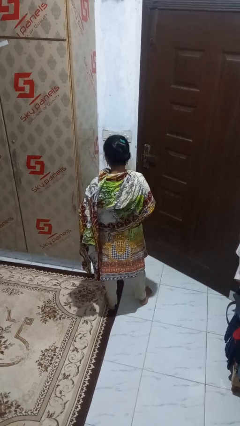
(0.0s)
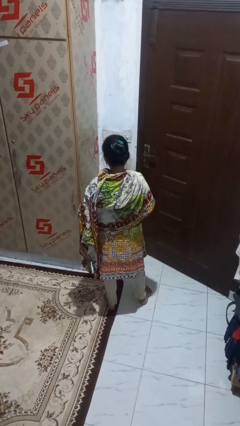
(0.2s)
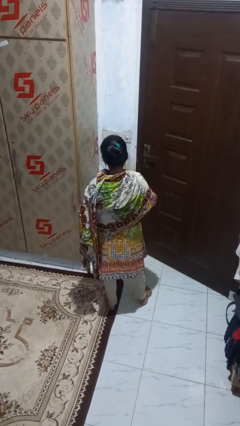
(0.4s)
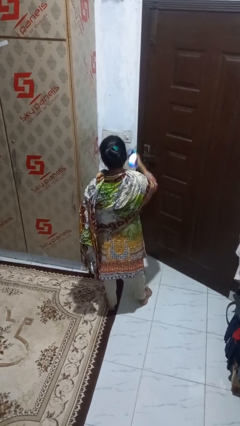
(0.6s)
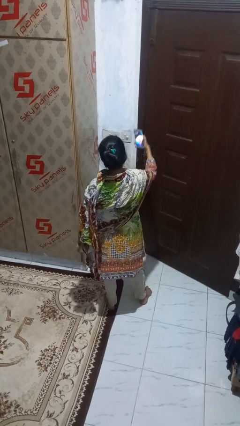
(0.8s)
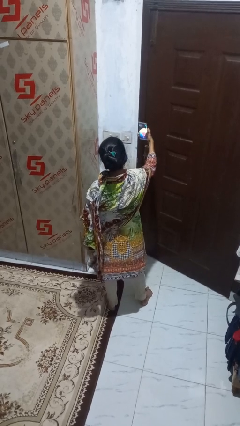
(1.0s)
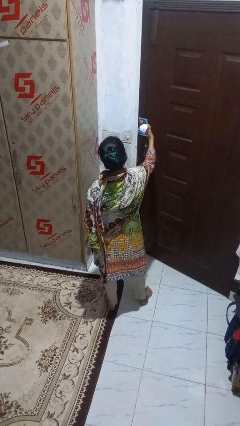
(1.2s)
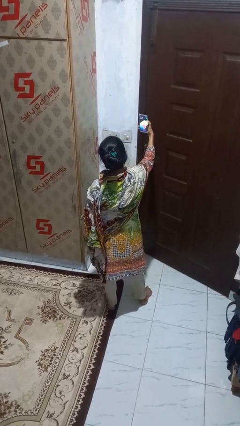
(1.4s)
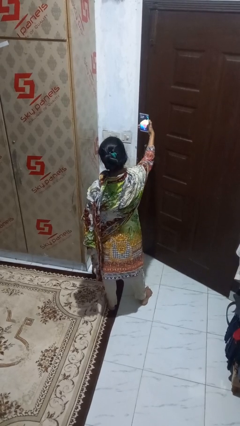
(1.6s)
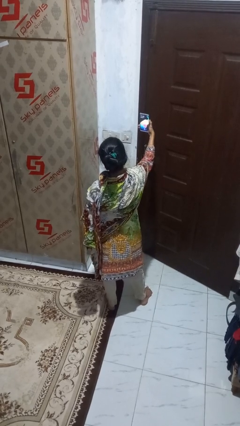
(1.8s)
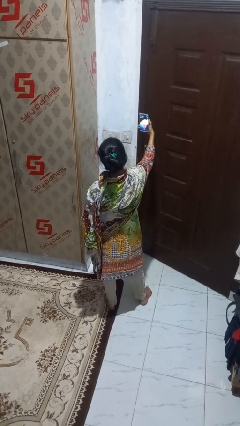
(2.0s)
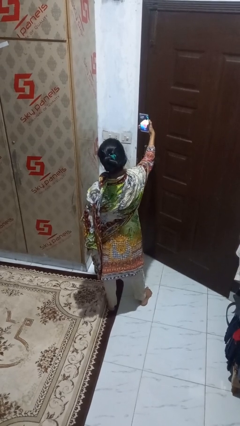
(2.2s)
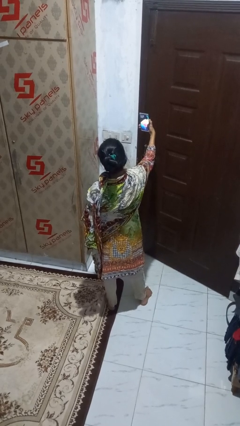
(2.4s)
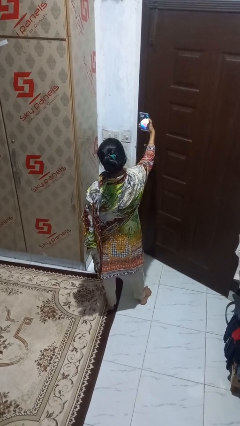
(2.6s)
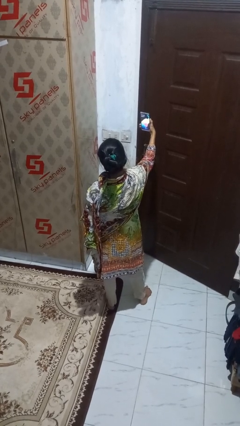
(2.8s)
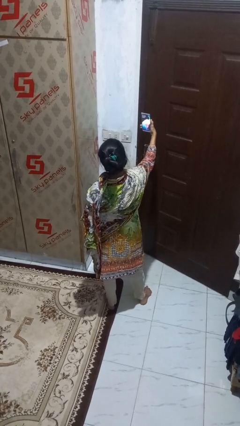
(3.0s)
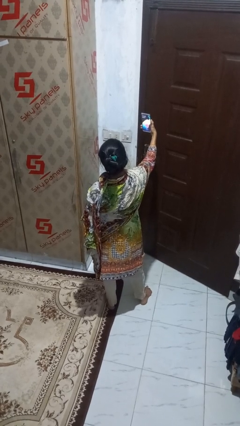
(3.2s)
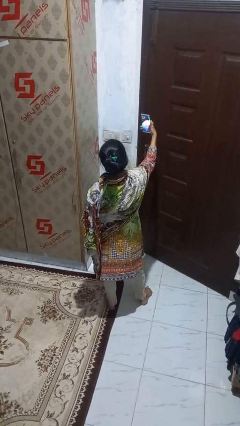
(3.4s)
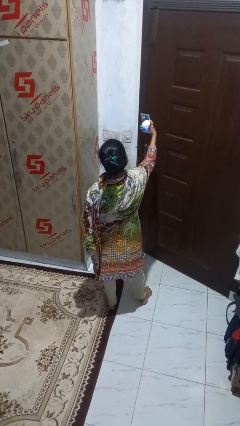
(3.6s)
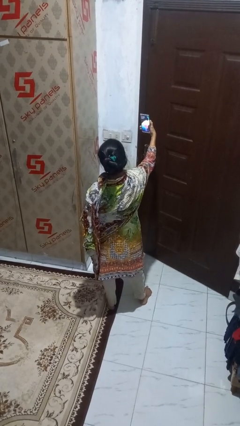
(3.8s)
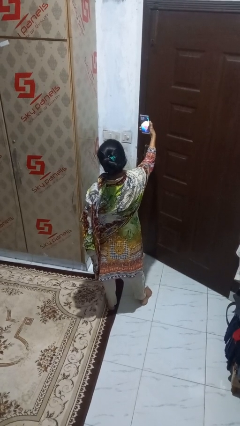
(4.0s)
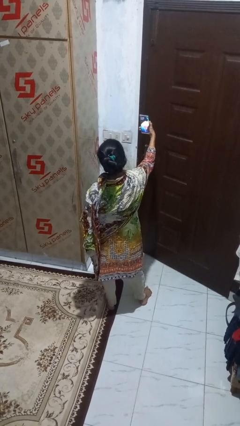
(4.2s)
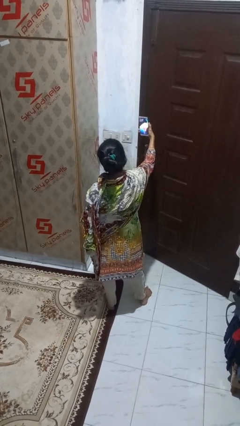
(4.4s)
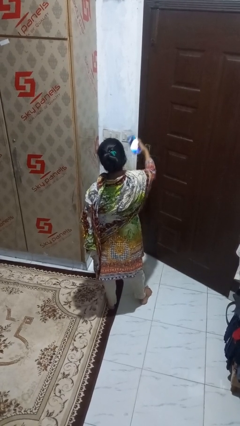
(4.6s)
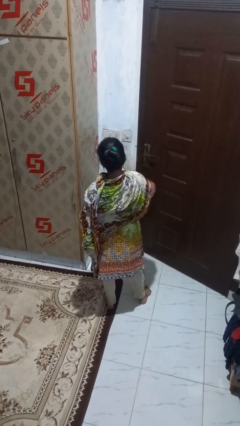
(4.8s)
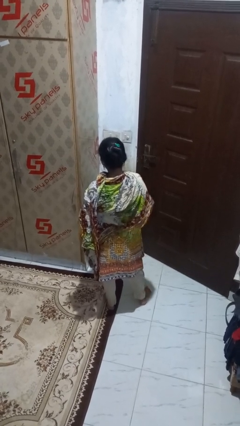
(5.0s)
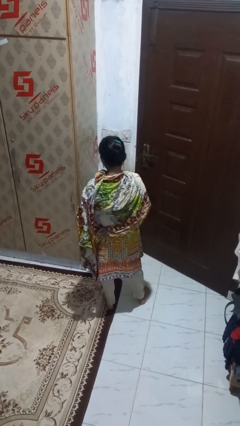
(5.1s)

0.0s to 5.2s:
person takes selfie

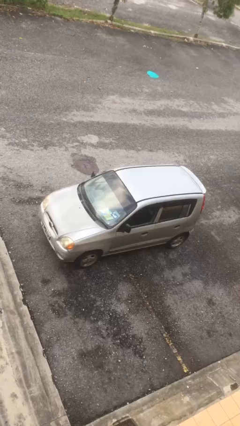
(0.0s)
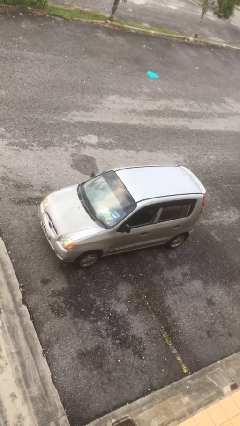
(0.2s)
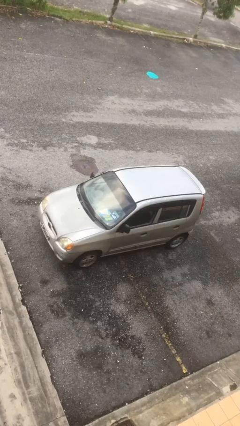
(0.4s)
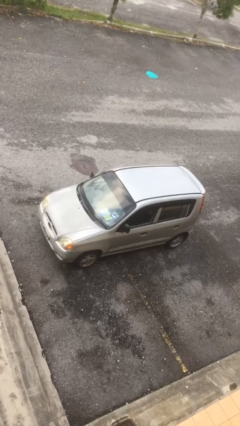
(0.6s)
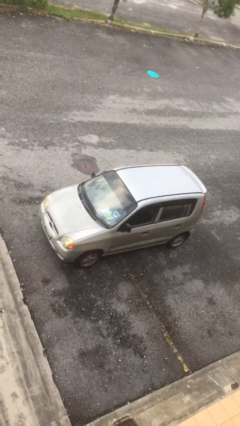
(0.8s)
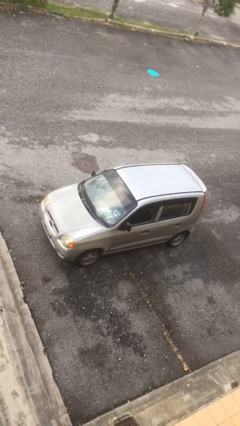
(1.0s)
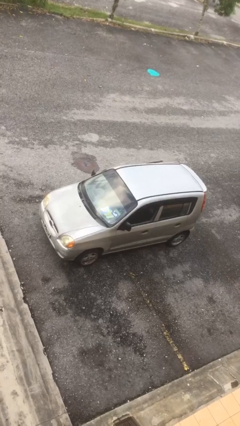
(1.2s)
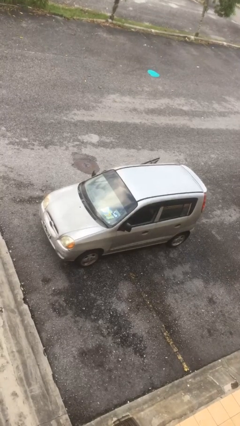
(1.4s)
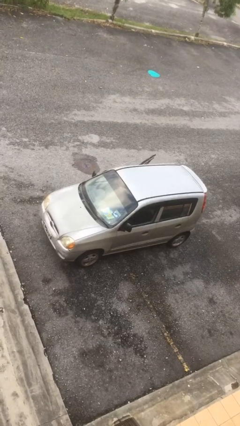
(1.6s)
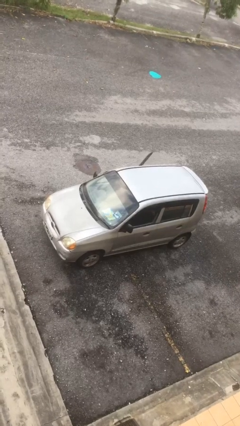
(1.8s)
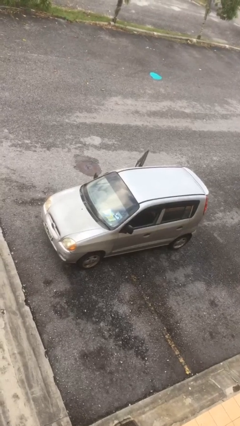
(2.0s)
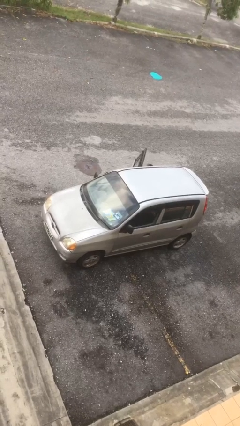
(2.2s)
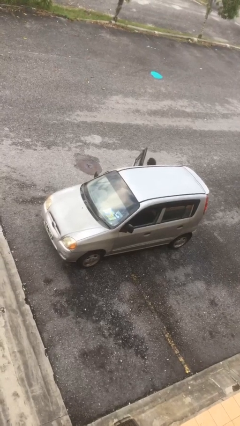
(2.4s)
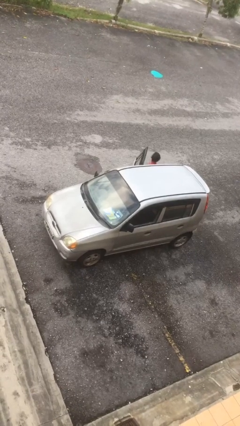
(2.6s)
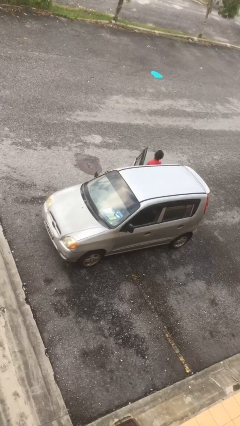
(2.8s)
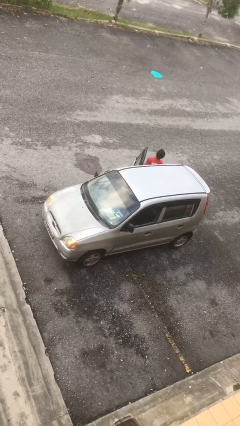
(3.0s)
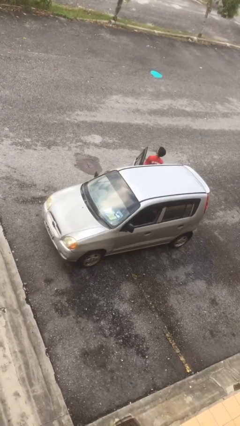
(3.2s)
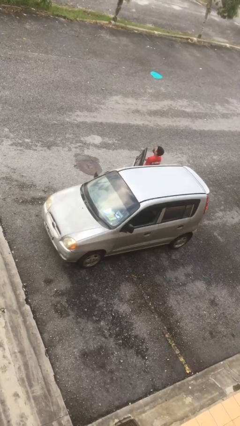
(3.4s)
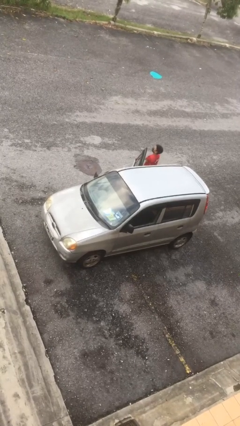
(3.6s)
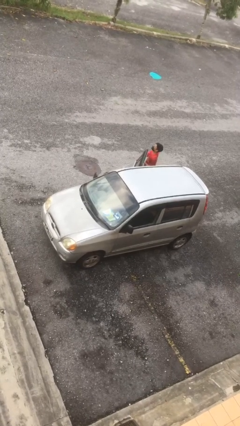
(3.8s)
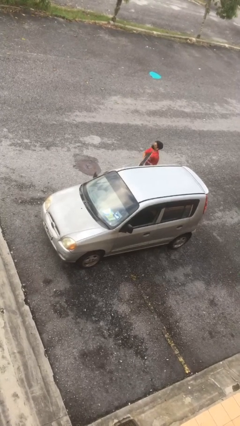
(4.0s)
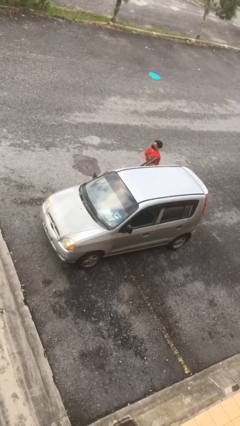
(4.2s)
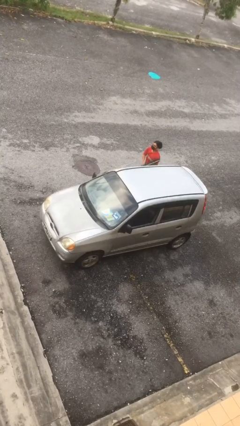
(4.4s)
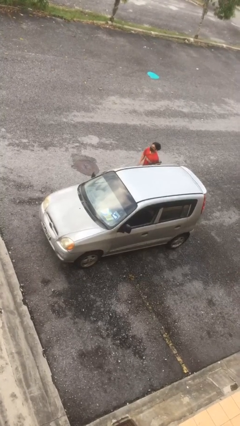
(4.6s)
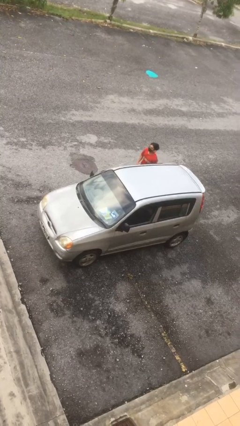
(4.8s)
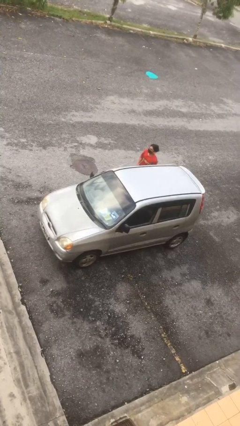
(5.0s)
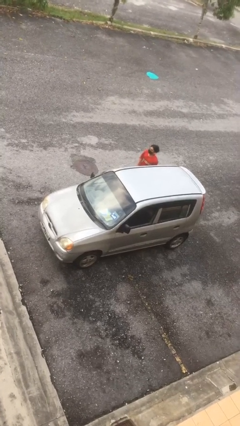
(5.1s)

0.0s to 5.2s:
car drops off person

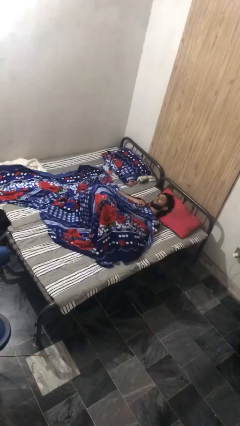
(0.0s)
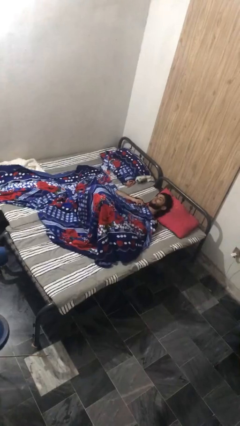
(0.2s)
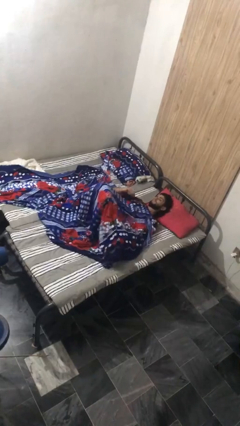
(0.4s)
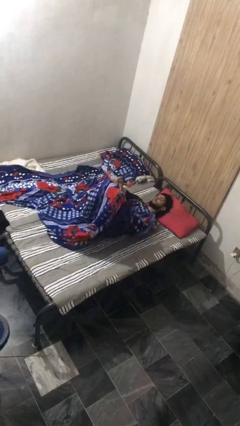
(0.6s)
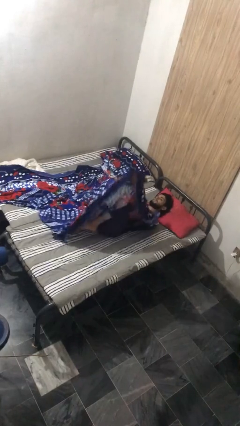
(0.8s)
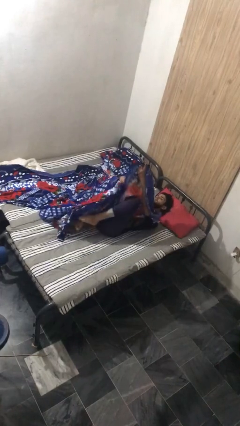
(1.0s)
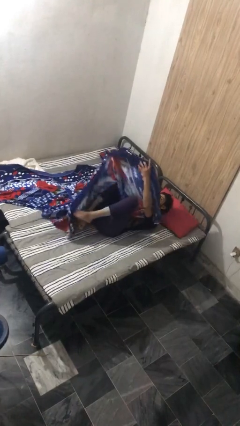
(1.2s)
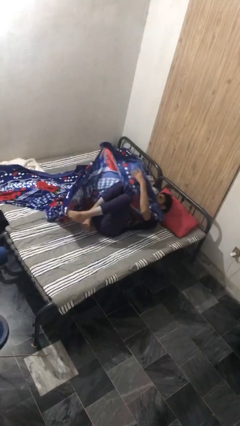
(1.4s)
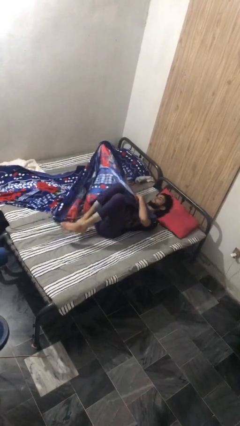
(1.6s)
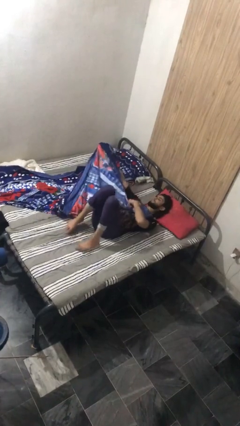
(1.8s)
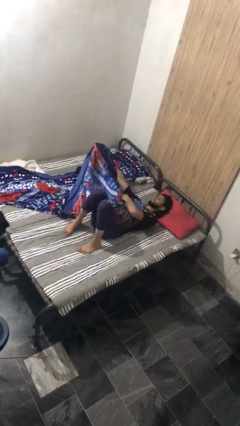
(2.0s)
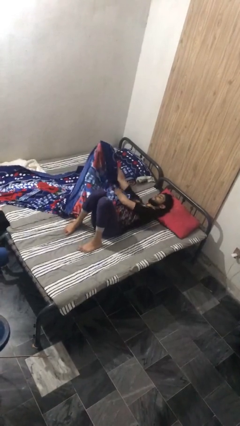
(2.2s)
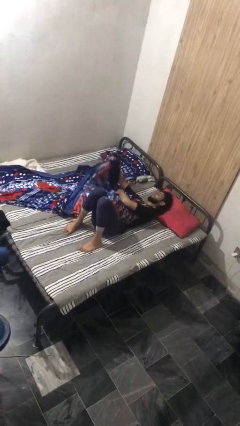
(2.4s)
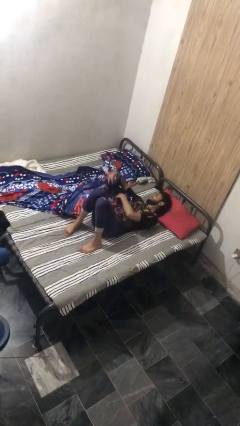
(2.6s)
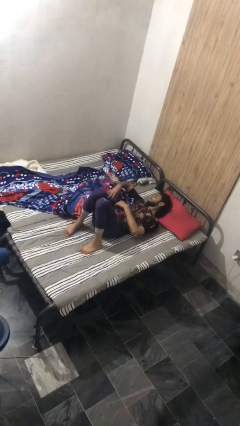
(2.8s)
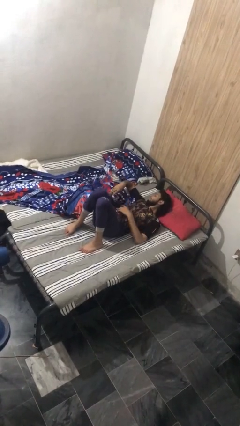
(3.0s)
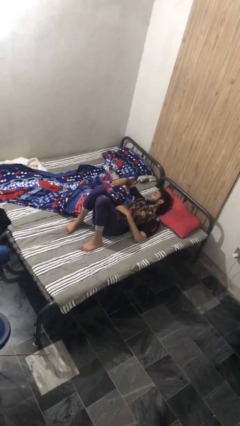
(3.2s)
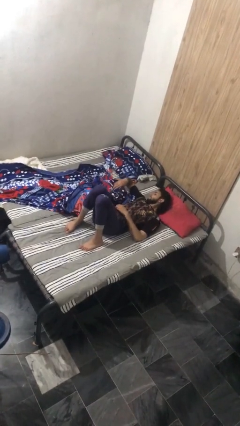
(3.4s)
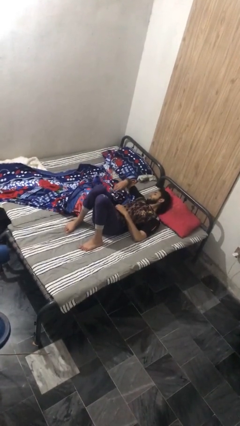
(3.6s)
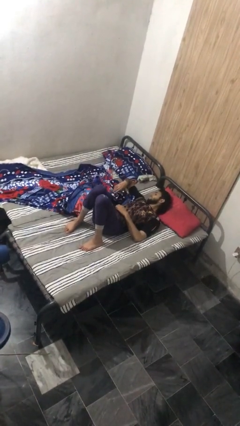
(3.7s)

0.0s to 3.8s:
person uncovers with bedsheets

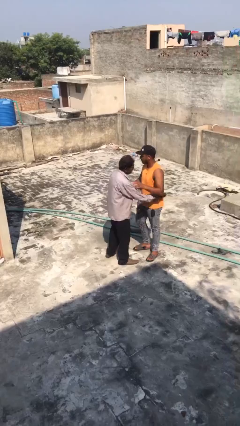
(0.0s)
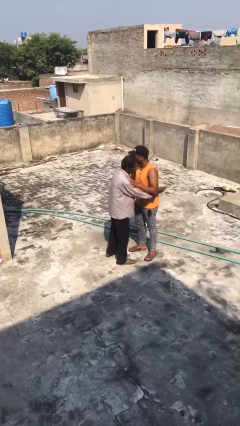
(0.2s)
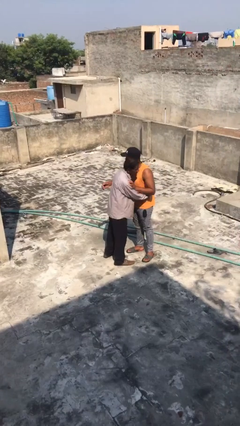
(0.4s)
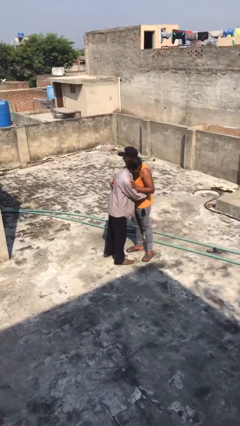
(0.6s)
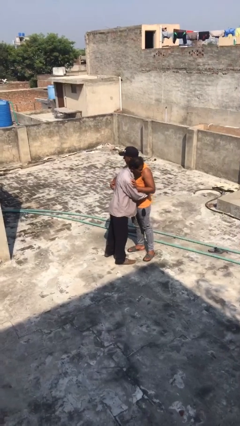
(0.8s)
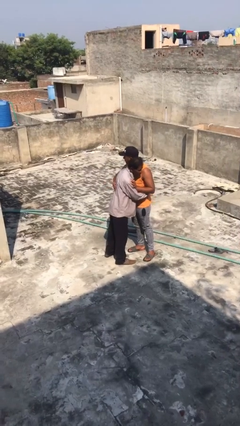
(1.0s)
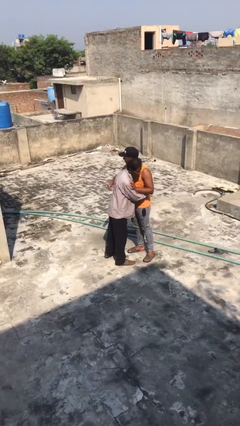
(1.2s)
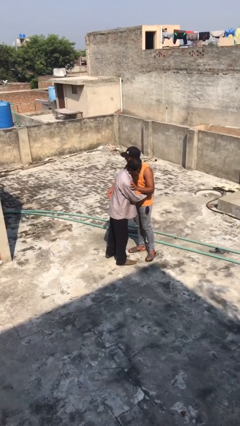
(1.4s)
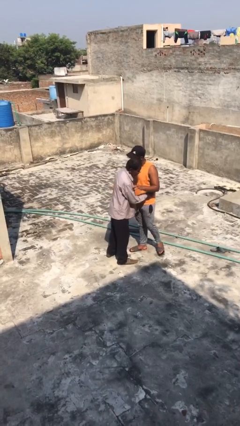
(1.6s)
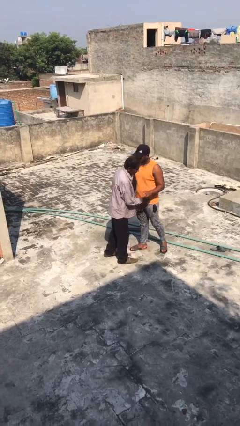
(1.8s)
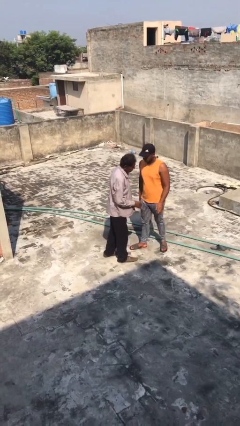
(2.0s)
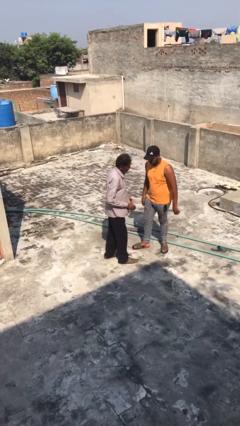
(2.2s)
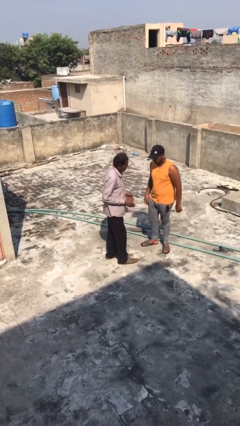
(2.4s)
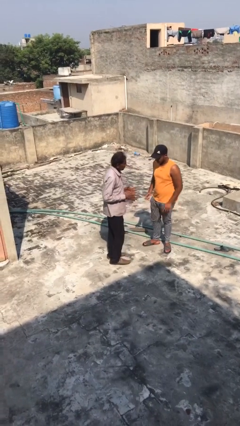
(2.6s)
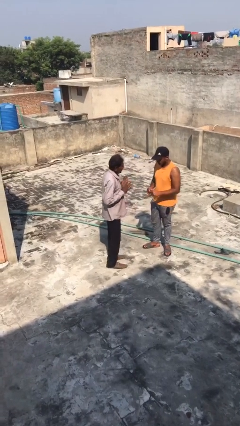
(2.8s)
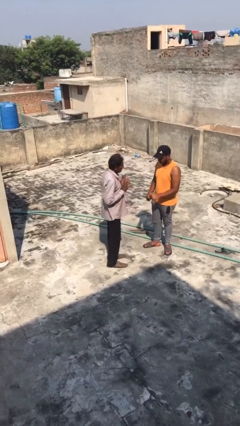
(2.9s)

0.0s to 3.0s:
person embraces person

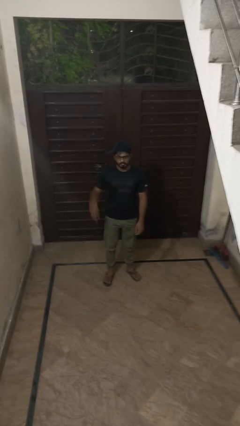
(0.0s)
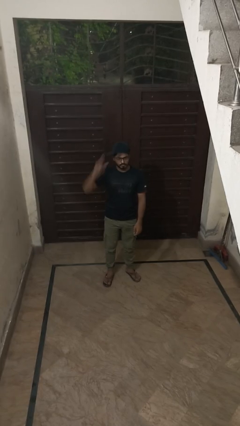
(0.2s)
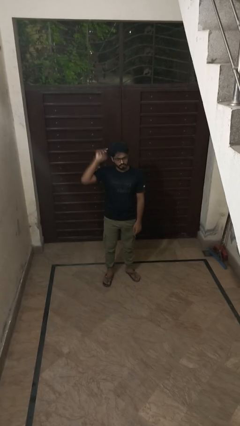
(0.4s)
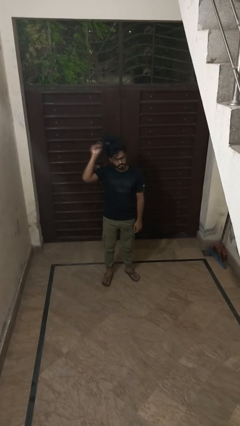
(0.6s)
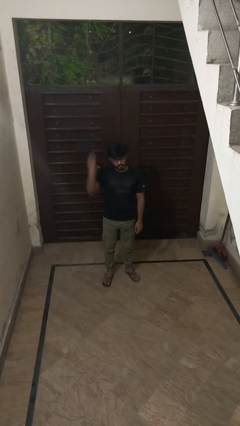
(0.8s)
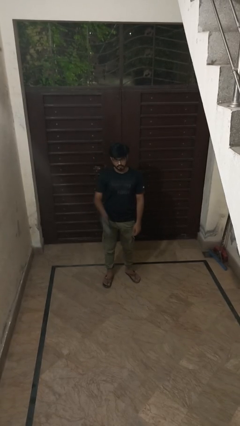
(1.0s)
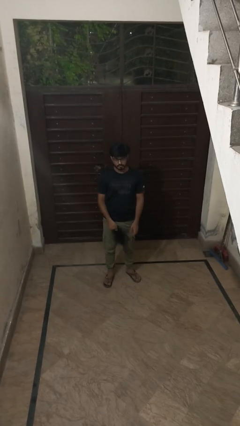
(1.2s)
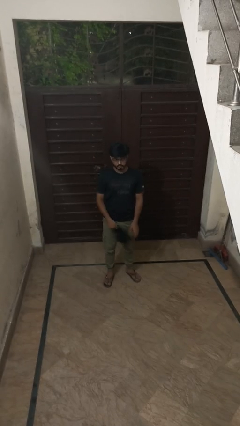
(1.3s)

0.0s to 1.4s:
person takes off hat
